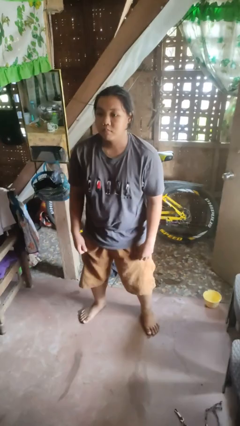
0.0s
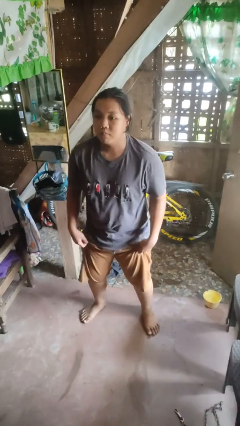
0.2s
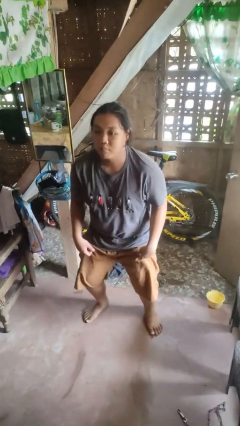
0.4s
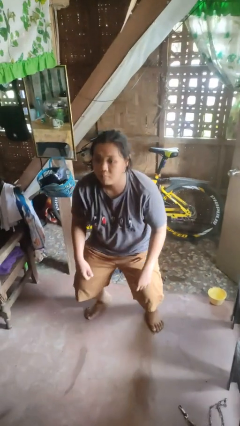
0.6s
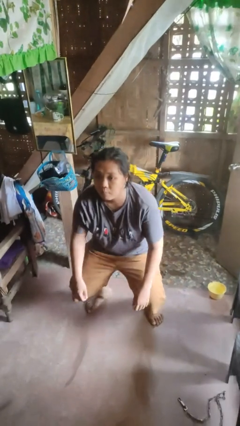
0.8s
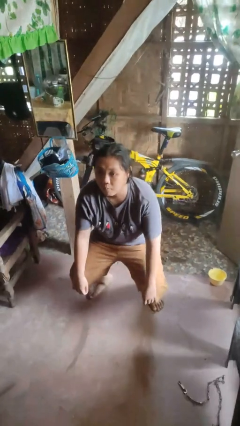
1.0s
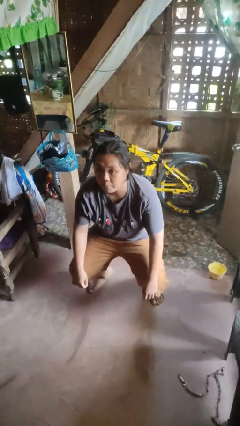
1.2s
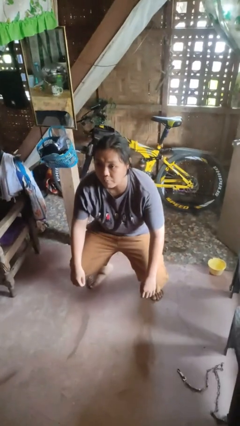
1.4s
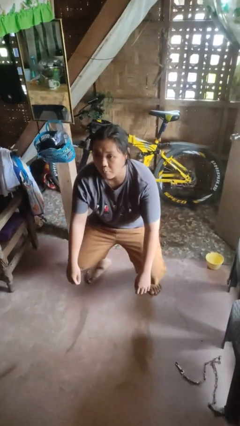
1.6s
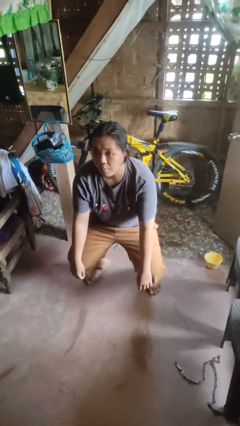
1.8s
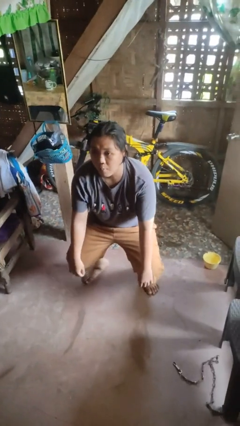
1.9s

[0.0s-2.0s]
person squats

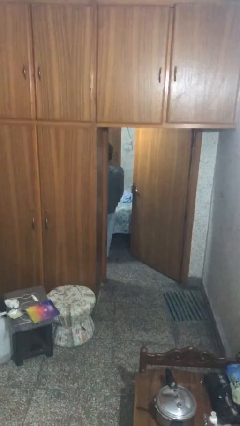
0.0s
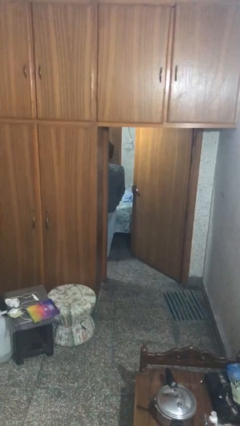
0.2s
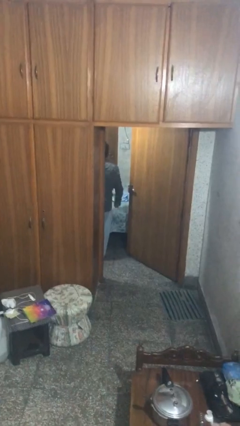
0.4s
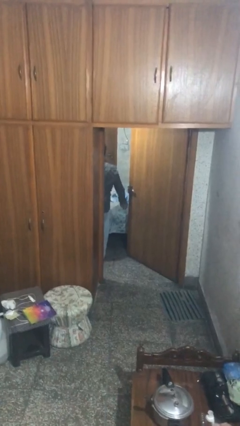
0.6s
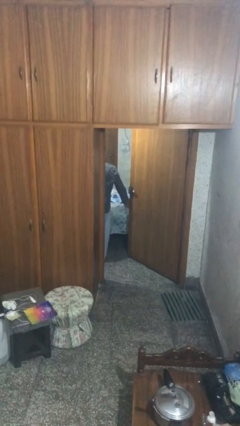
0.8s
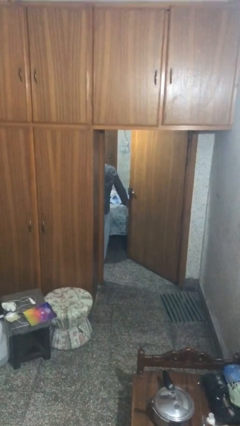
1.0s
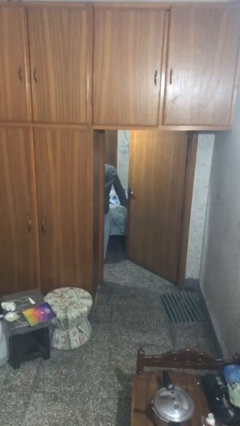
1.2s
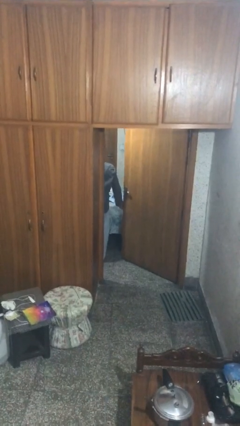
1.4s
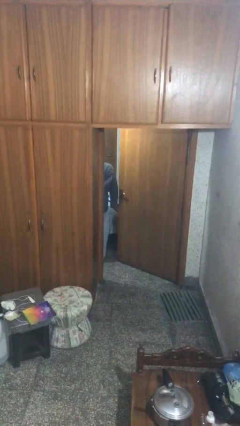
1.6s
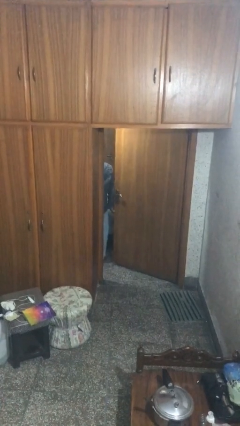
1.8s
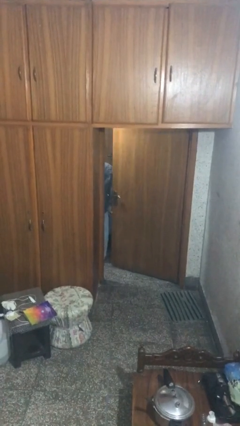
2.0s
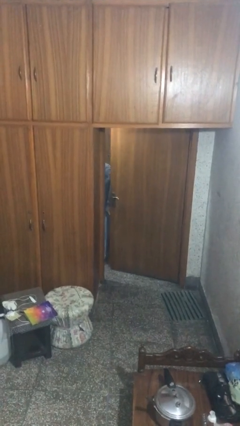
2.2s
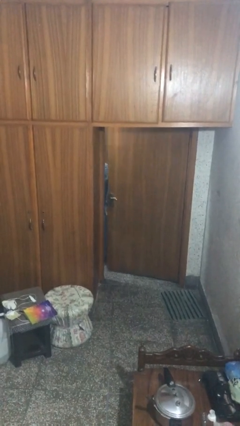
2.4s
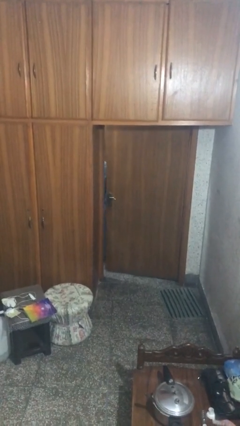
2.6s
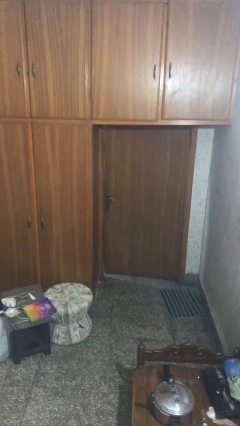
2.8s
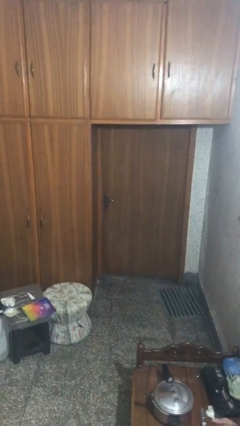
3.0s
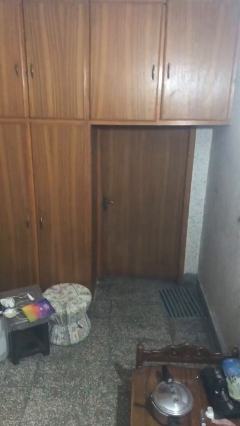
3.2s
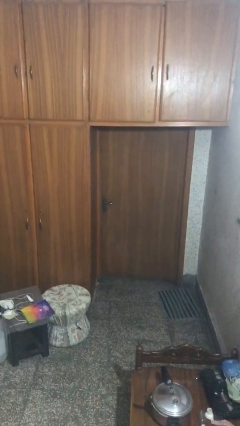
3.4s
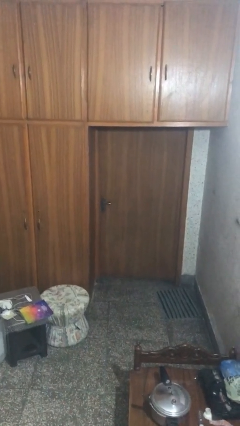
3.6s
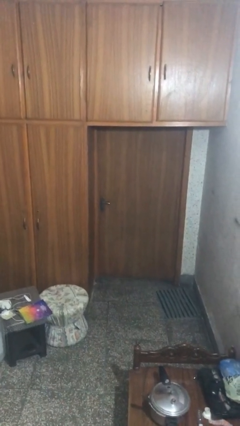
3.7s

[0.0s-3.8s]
person closes facility door

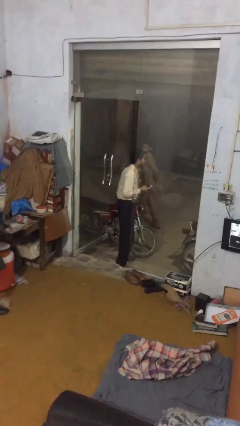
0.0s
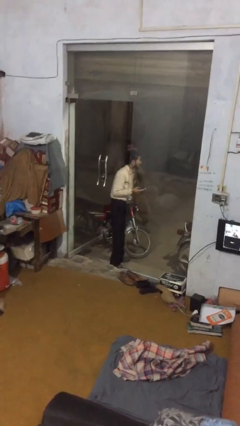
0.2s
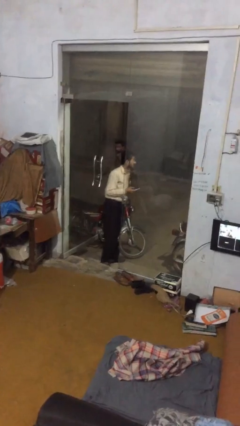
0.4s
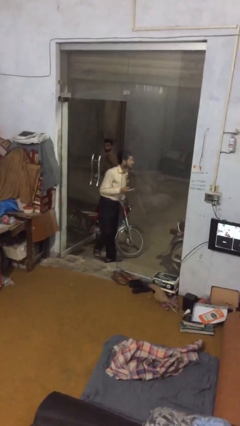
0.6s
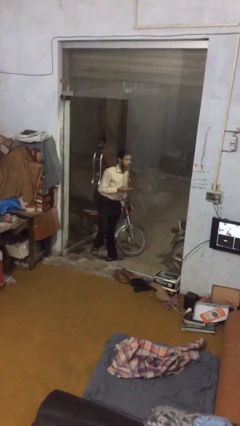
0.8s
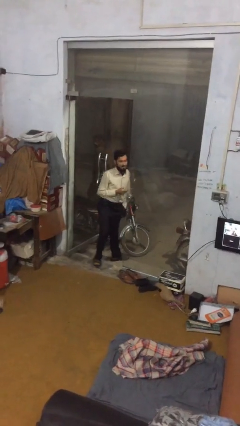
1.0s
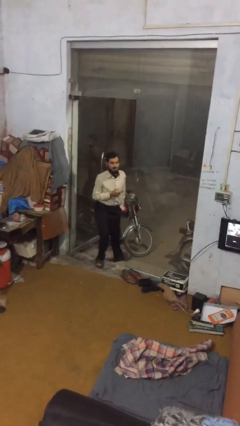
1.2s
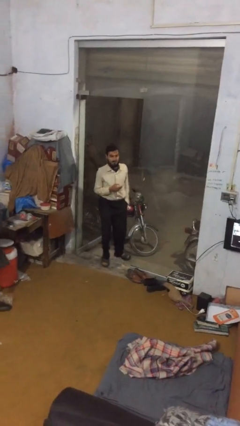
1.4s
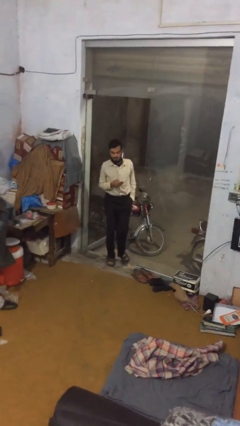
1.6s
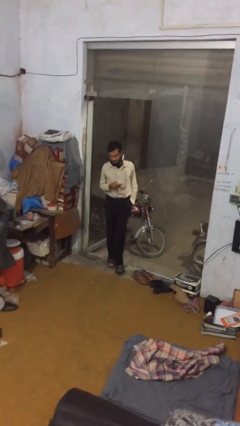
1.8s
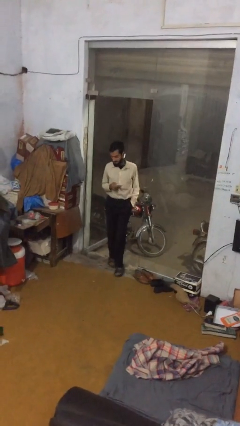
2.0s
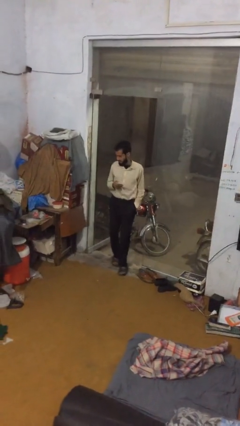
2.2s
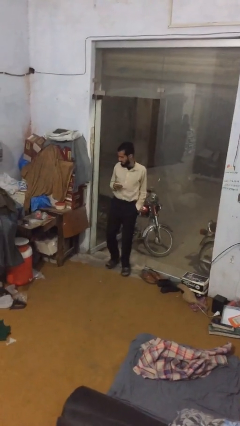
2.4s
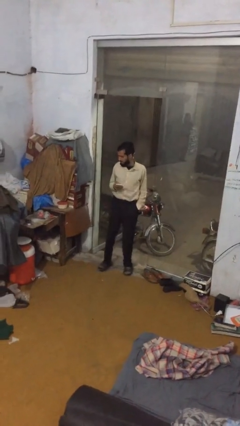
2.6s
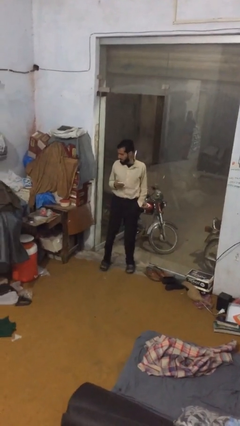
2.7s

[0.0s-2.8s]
person enters scene through structure

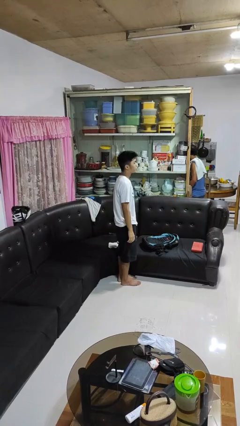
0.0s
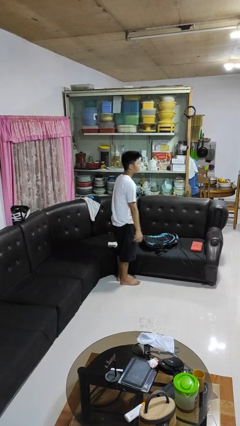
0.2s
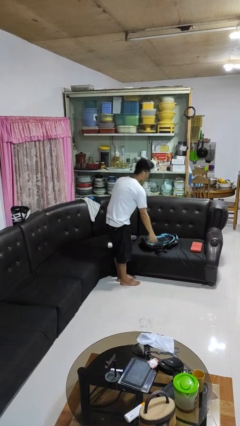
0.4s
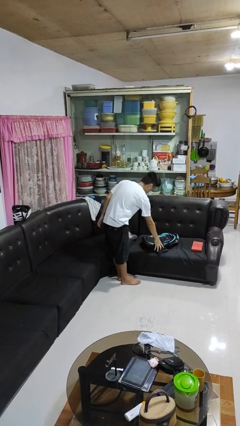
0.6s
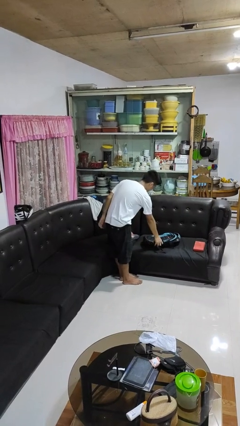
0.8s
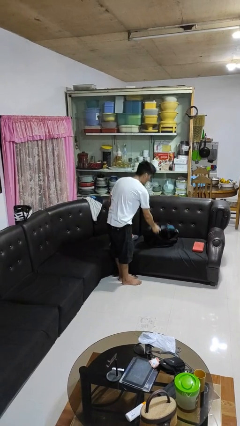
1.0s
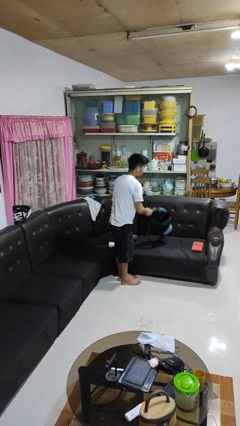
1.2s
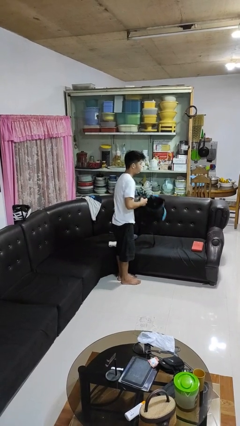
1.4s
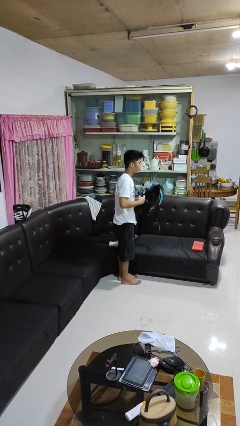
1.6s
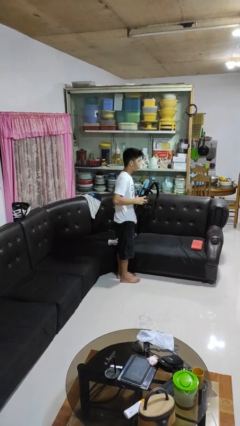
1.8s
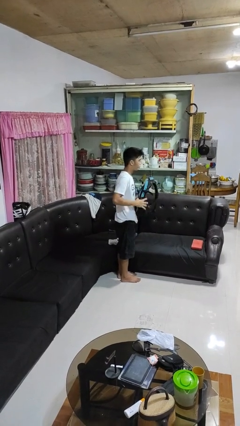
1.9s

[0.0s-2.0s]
person puts down object on couch

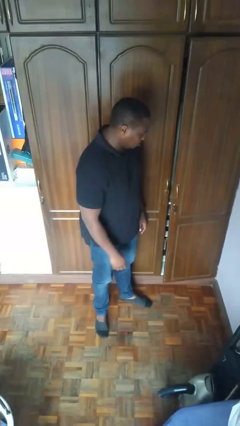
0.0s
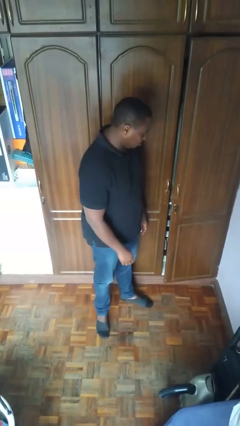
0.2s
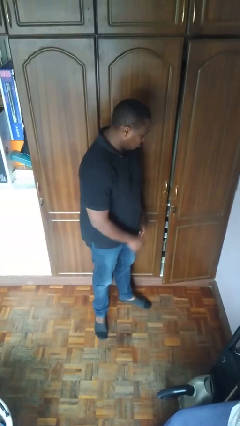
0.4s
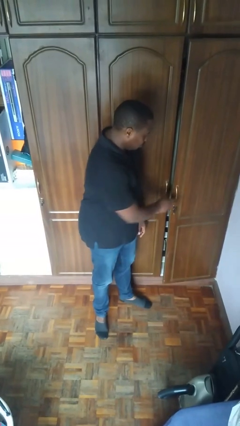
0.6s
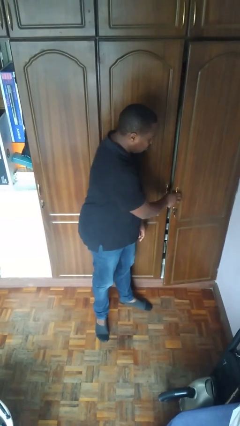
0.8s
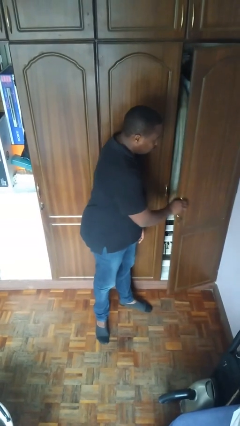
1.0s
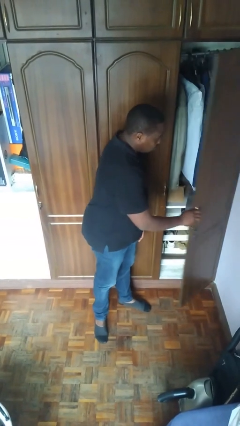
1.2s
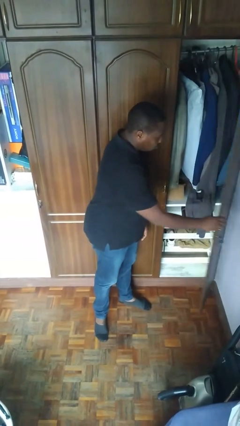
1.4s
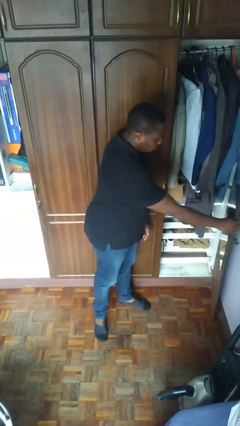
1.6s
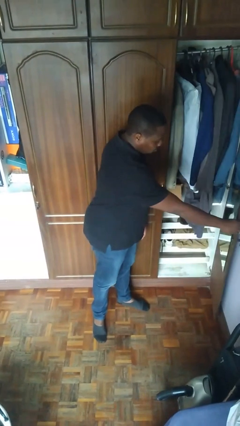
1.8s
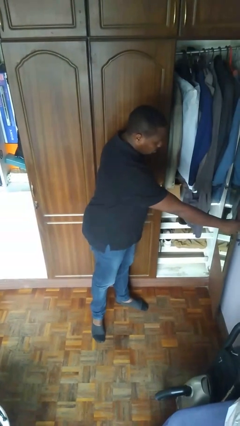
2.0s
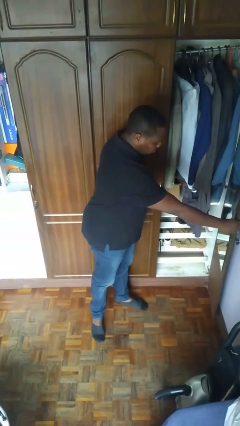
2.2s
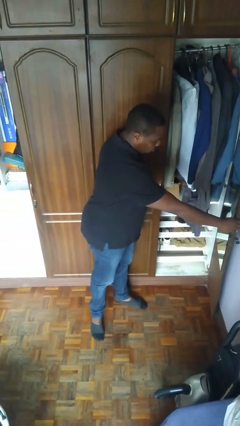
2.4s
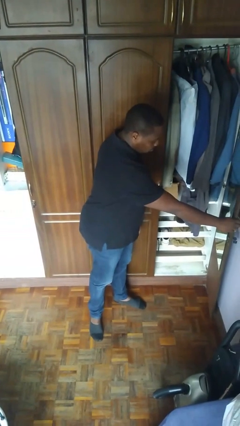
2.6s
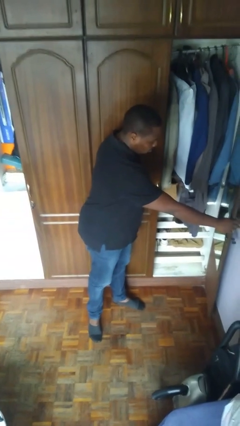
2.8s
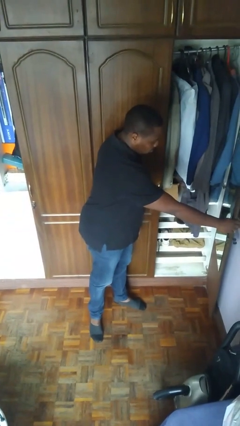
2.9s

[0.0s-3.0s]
person opens closet door

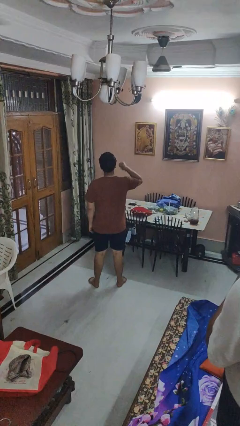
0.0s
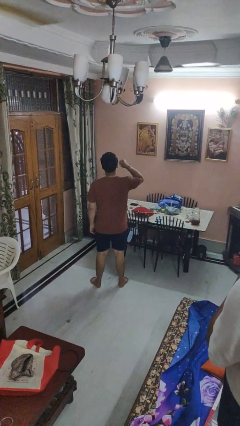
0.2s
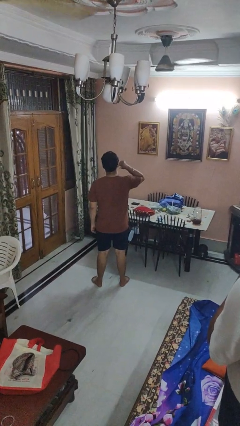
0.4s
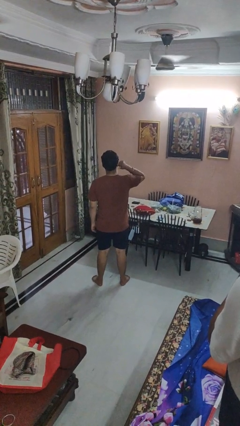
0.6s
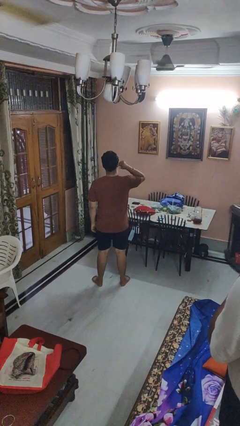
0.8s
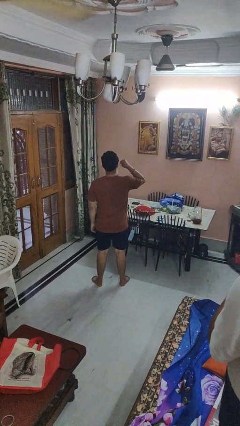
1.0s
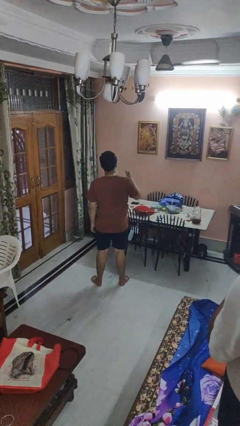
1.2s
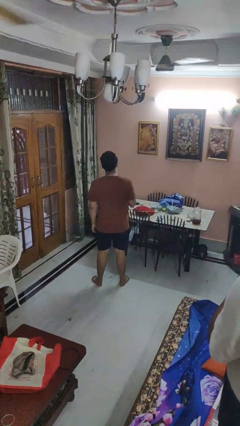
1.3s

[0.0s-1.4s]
person gestures behind me

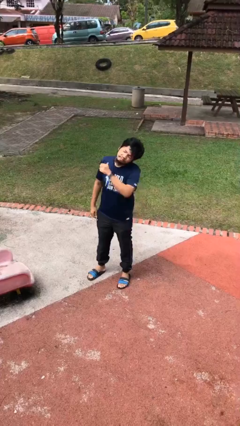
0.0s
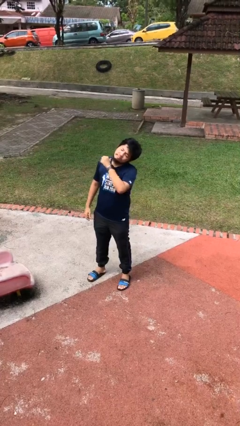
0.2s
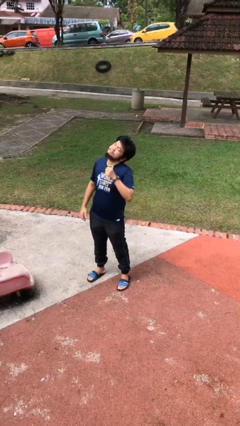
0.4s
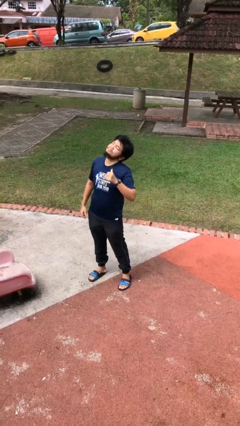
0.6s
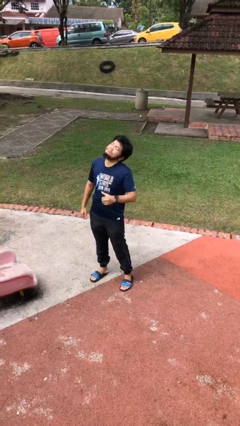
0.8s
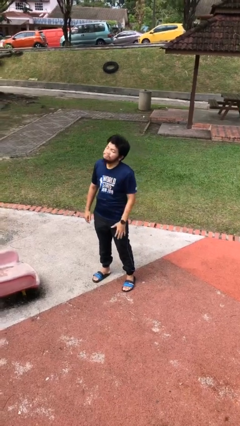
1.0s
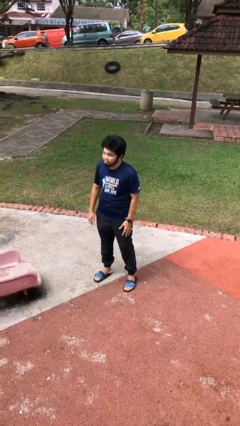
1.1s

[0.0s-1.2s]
person gestures cut

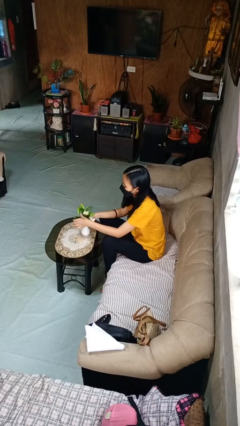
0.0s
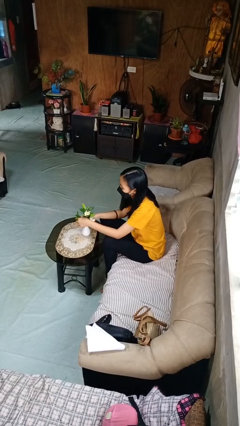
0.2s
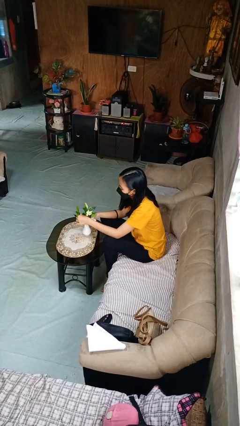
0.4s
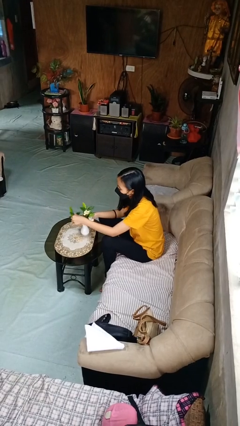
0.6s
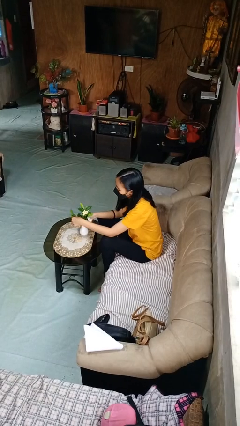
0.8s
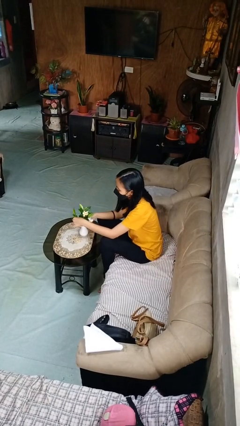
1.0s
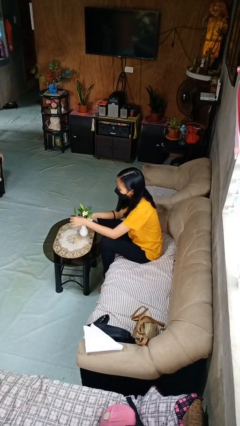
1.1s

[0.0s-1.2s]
person arranges flowers in vase
